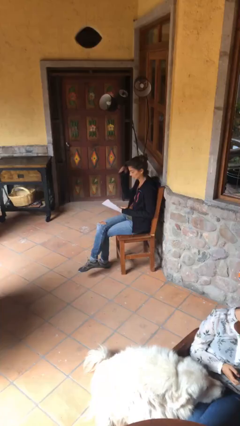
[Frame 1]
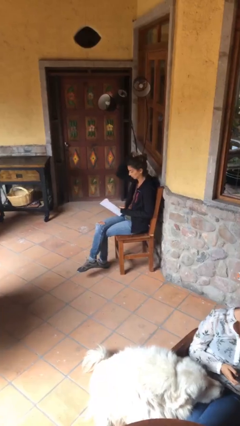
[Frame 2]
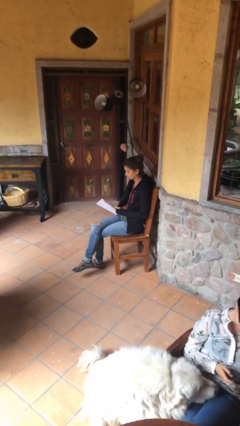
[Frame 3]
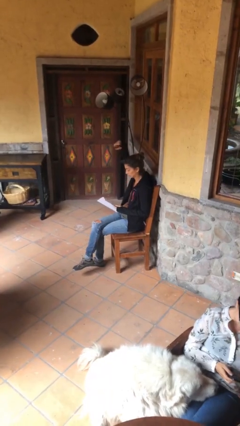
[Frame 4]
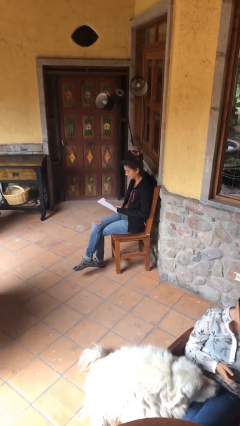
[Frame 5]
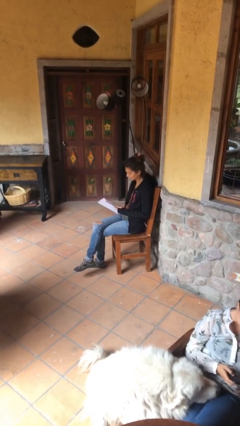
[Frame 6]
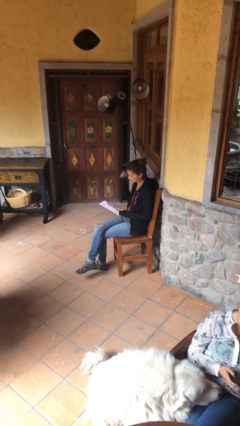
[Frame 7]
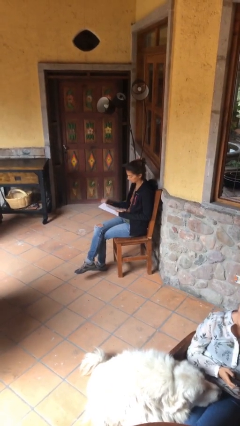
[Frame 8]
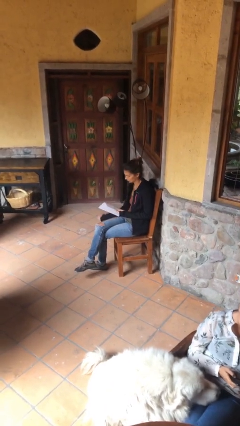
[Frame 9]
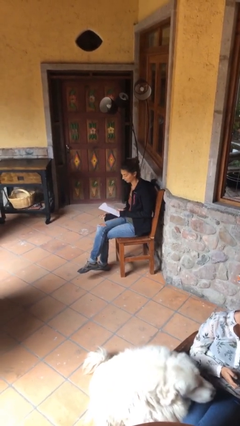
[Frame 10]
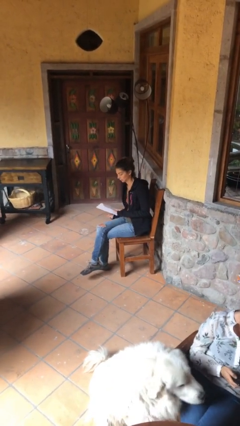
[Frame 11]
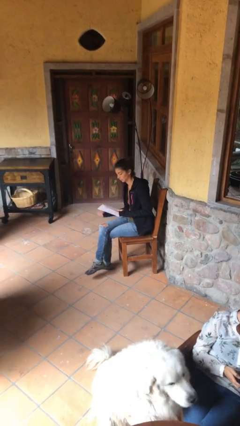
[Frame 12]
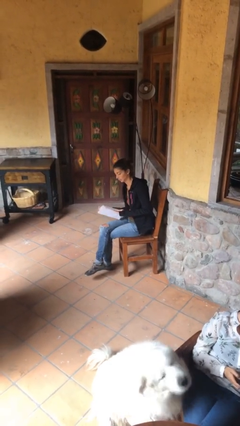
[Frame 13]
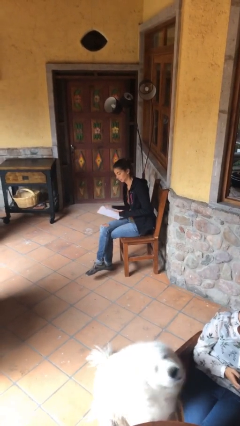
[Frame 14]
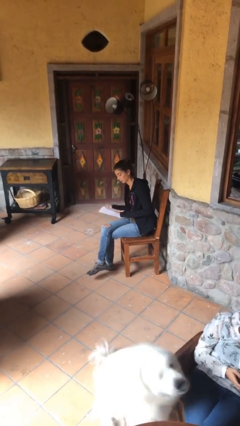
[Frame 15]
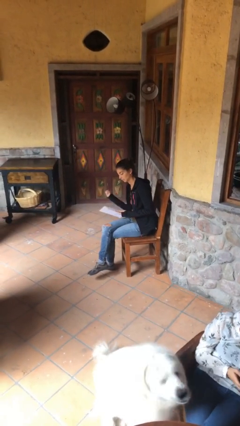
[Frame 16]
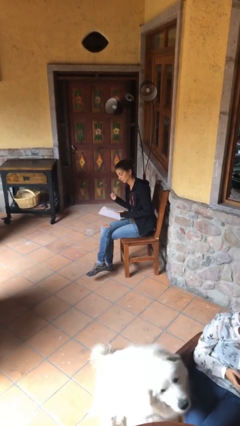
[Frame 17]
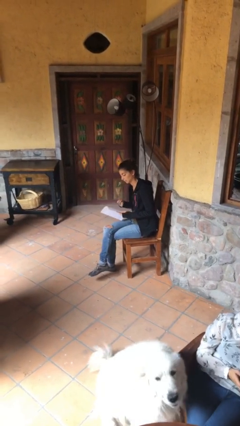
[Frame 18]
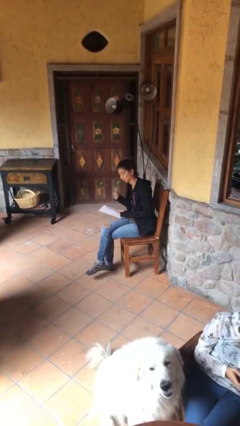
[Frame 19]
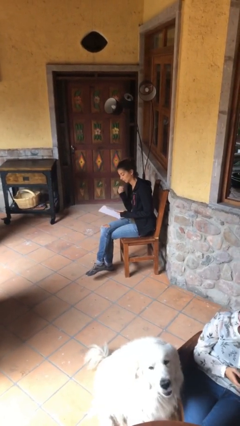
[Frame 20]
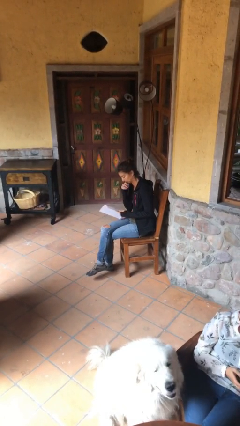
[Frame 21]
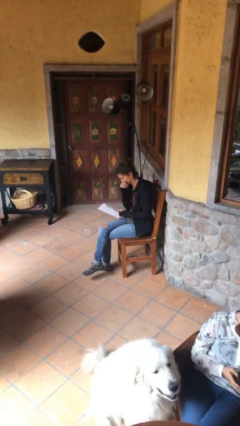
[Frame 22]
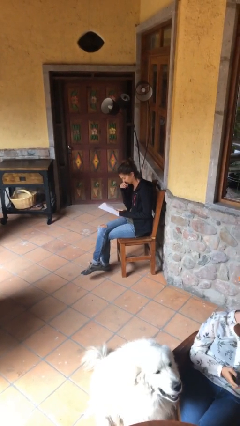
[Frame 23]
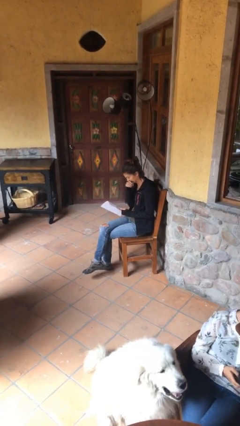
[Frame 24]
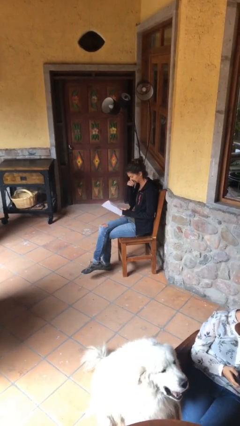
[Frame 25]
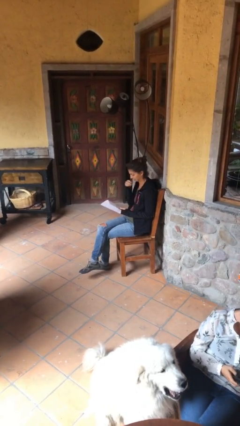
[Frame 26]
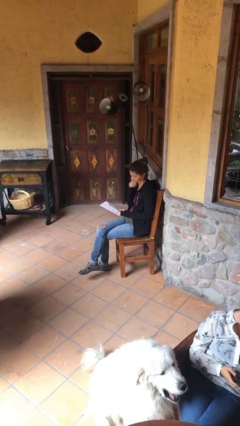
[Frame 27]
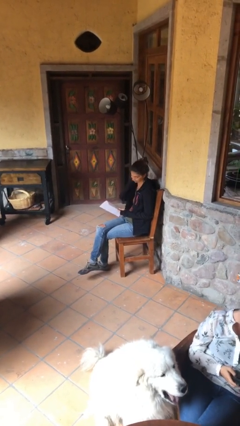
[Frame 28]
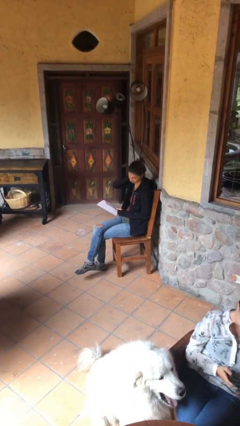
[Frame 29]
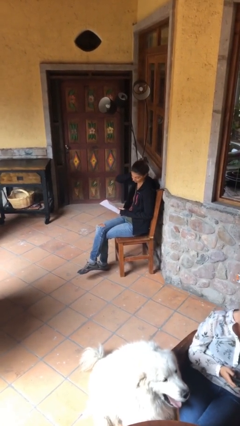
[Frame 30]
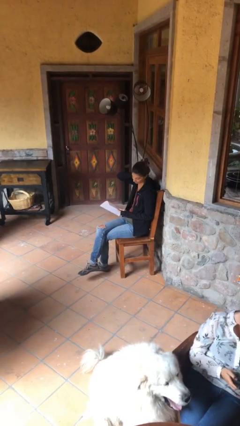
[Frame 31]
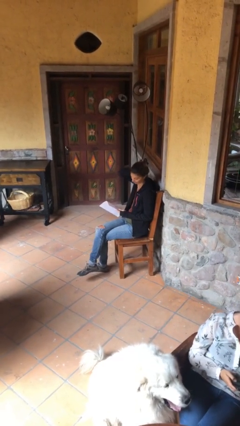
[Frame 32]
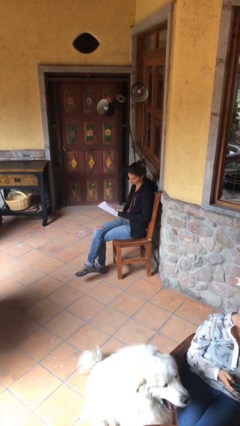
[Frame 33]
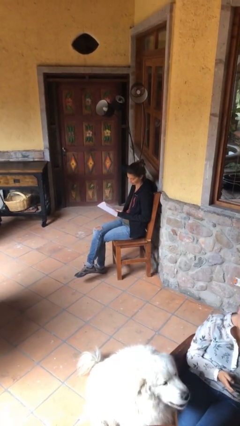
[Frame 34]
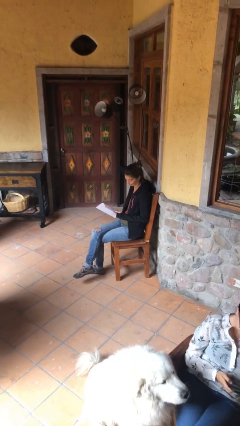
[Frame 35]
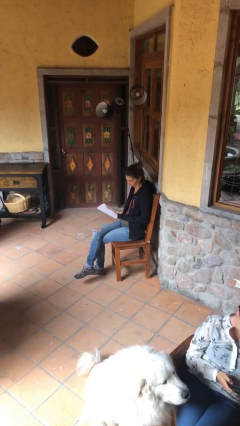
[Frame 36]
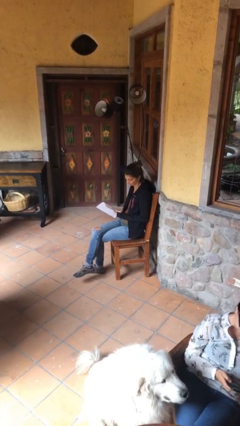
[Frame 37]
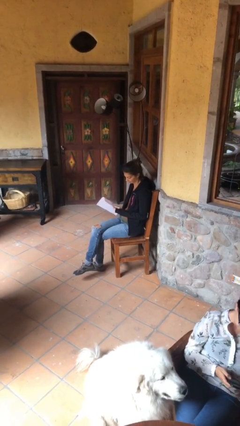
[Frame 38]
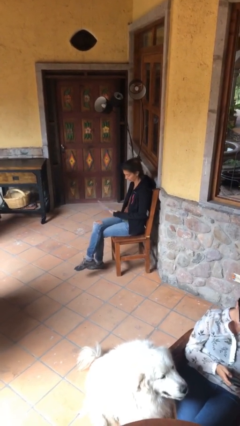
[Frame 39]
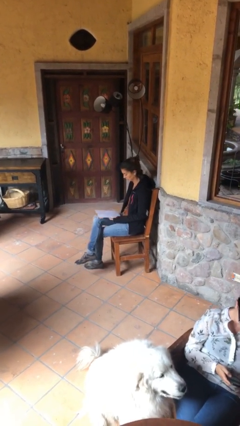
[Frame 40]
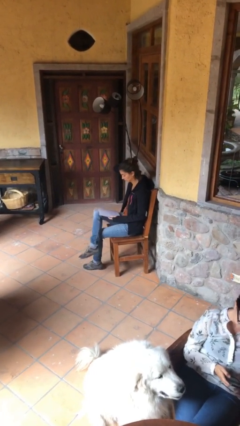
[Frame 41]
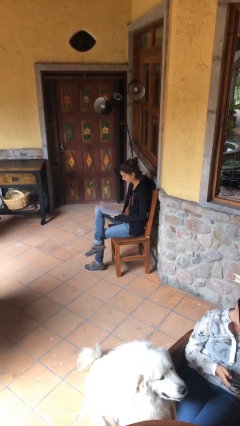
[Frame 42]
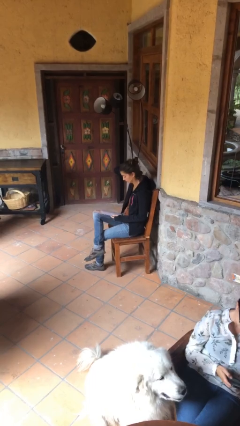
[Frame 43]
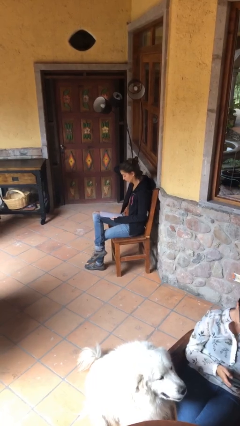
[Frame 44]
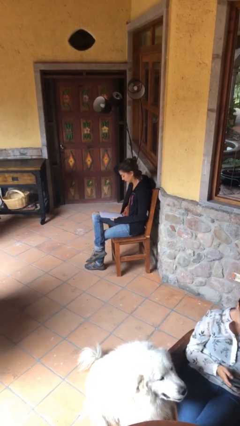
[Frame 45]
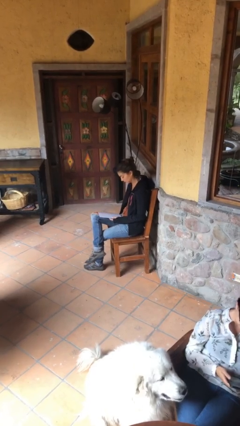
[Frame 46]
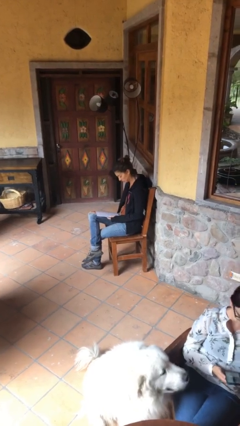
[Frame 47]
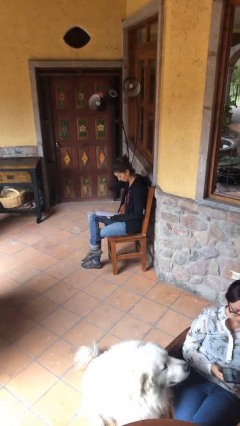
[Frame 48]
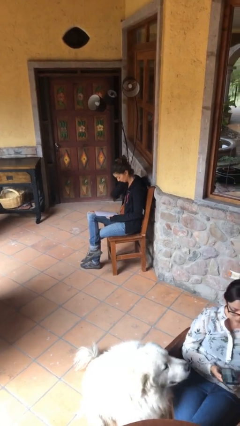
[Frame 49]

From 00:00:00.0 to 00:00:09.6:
person reads document

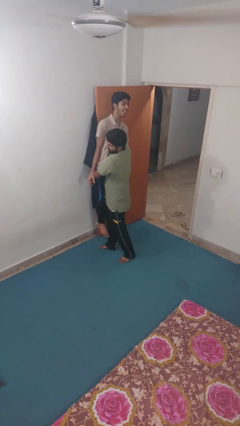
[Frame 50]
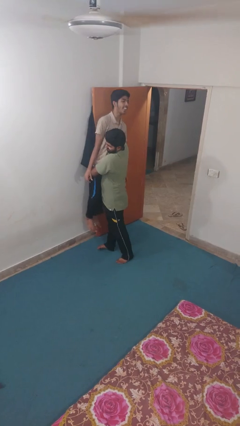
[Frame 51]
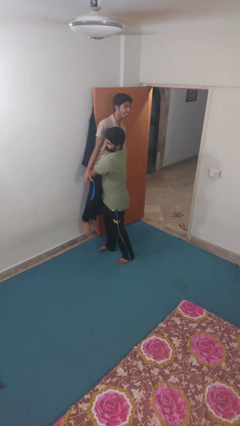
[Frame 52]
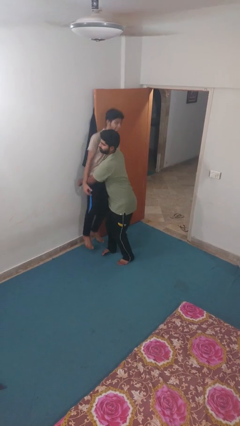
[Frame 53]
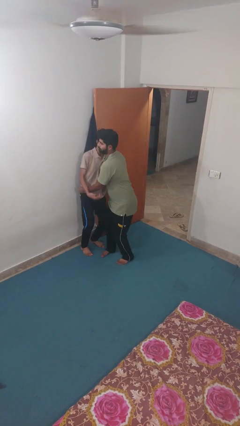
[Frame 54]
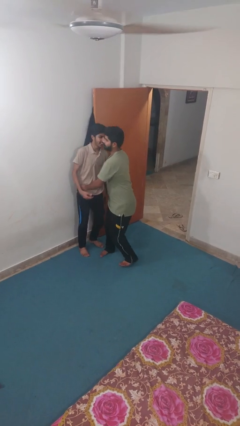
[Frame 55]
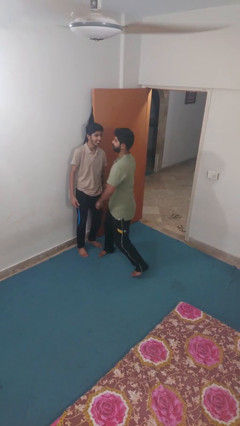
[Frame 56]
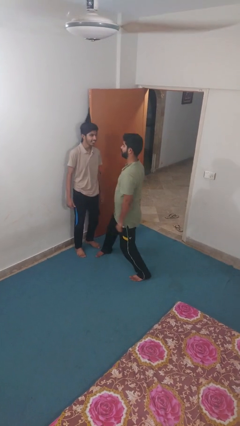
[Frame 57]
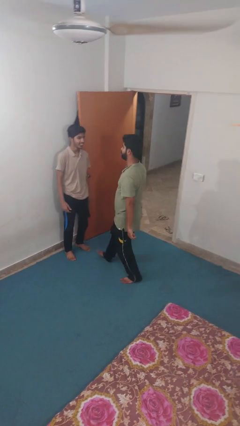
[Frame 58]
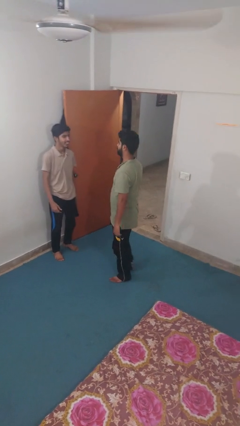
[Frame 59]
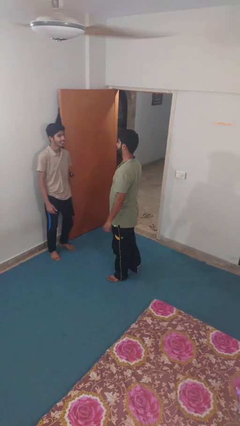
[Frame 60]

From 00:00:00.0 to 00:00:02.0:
person puts down person

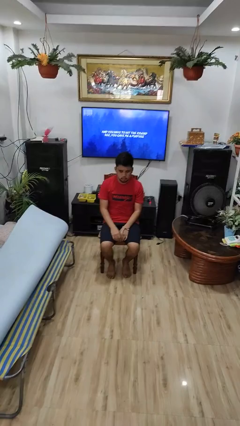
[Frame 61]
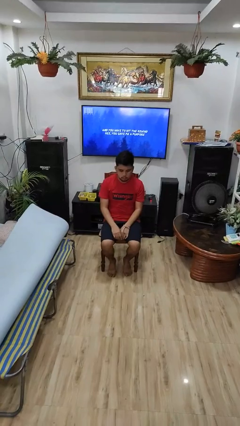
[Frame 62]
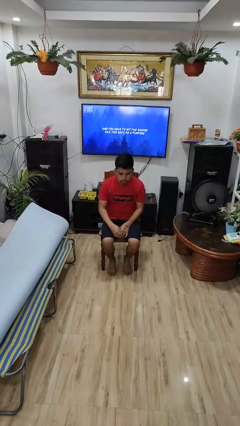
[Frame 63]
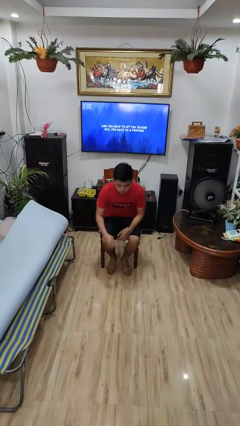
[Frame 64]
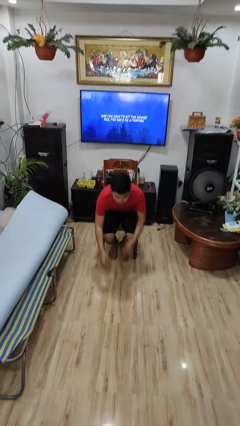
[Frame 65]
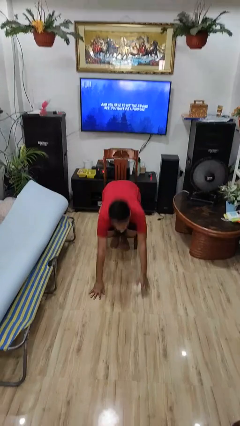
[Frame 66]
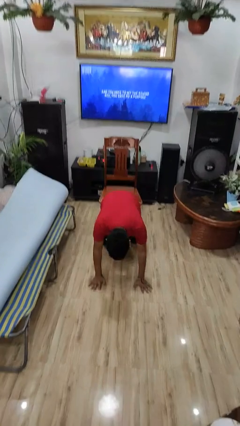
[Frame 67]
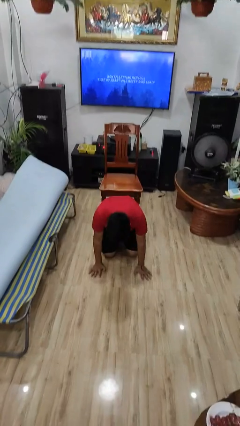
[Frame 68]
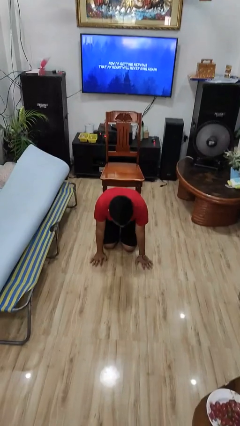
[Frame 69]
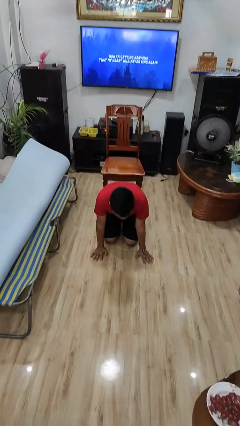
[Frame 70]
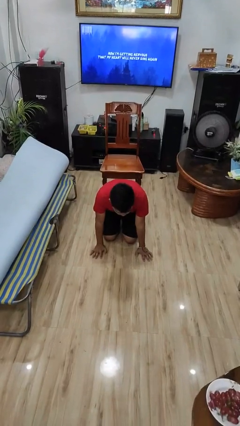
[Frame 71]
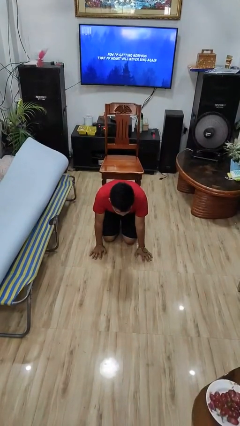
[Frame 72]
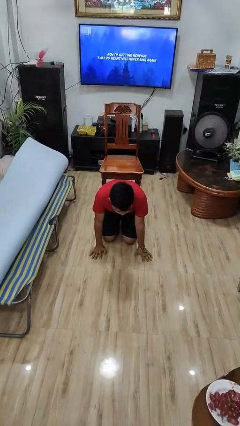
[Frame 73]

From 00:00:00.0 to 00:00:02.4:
person falls from chair

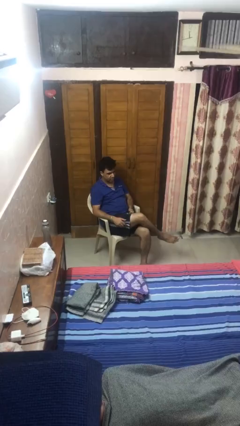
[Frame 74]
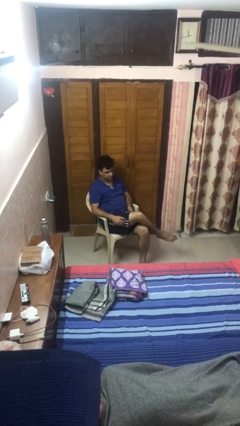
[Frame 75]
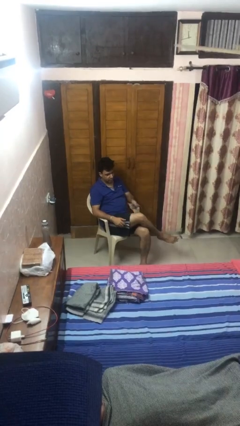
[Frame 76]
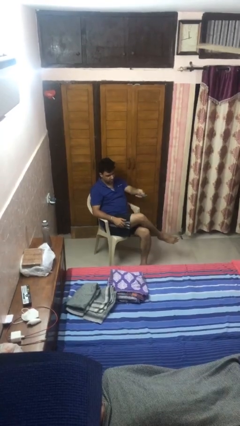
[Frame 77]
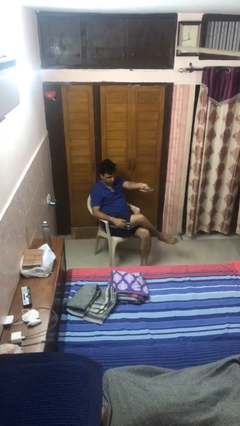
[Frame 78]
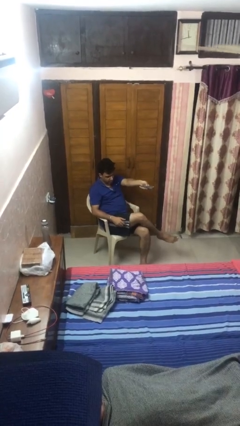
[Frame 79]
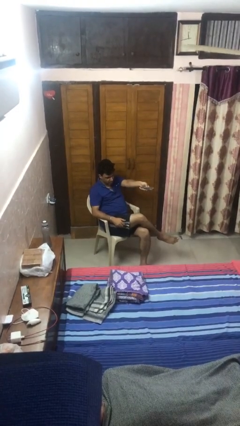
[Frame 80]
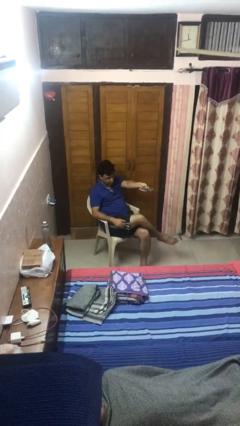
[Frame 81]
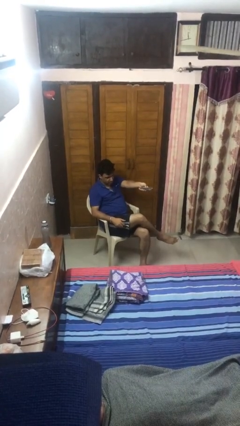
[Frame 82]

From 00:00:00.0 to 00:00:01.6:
person uses television remote

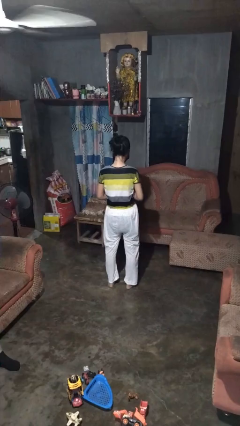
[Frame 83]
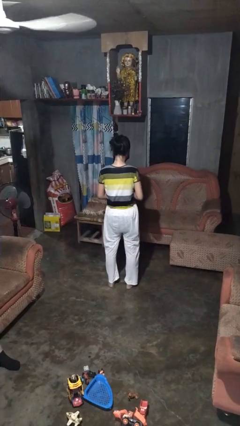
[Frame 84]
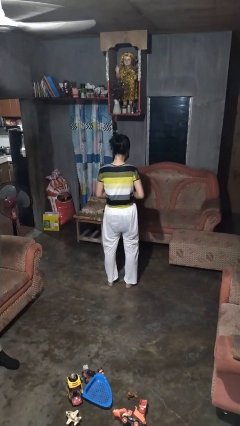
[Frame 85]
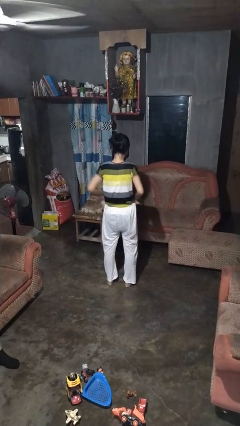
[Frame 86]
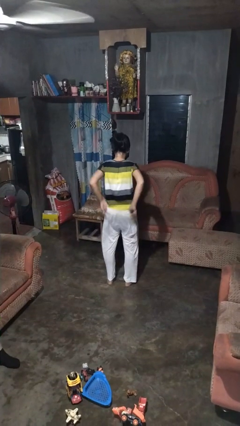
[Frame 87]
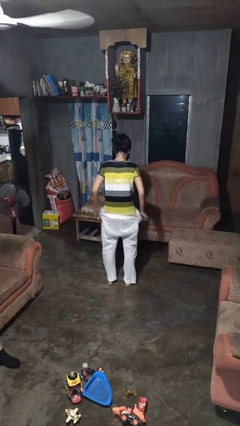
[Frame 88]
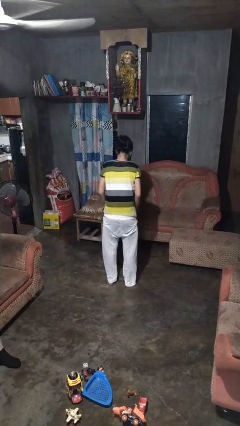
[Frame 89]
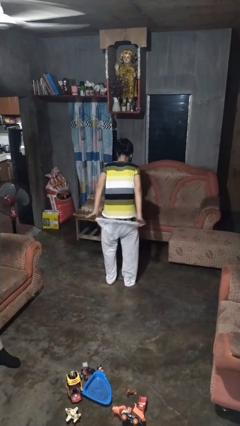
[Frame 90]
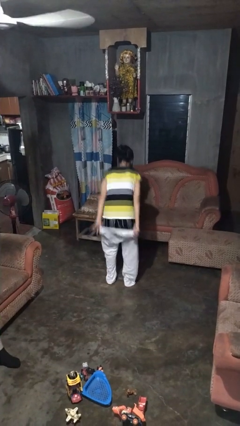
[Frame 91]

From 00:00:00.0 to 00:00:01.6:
person takes off pants

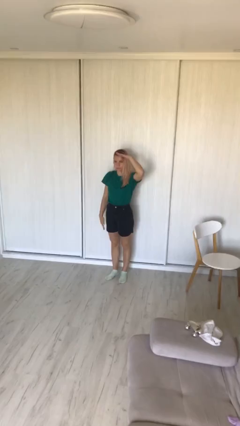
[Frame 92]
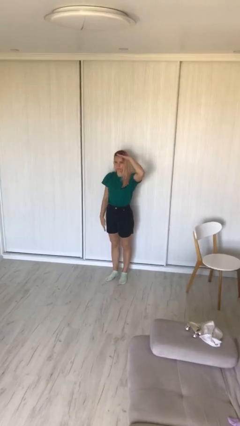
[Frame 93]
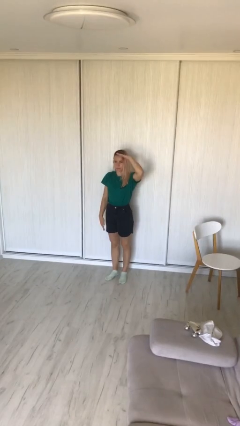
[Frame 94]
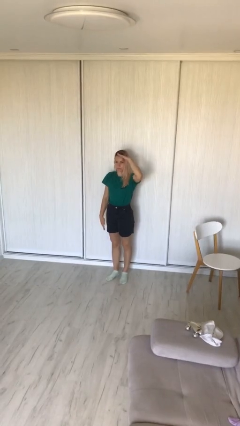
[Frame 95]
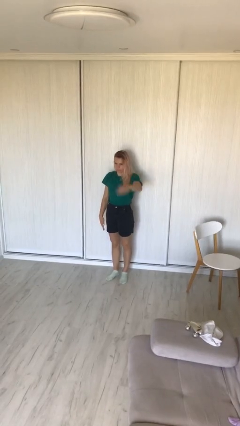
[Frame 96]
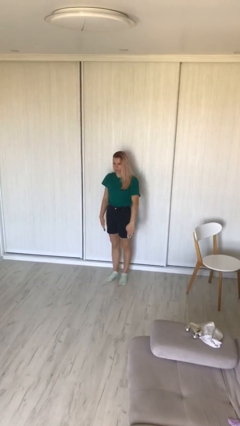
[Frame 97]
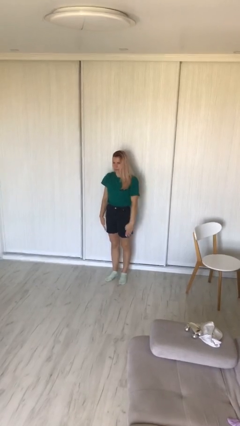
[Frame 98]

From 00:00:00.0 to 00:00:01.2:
person salutes
